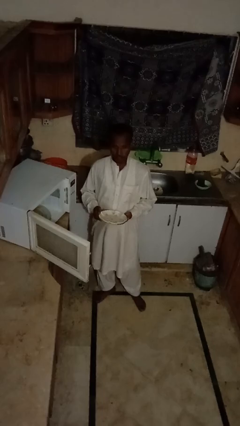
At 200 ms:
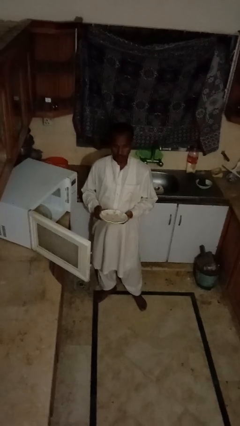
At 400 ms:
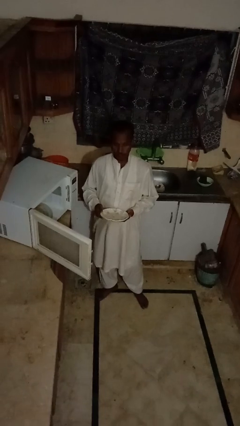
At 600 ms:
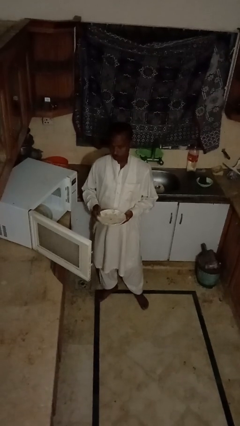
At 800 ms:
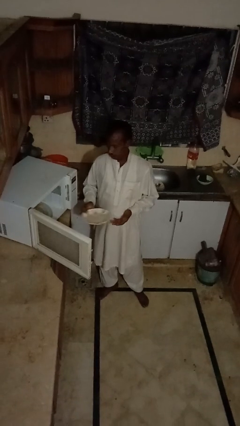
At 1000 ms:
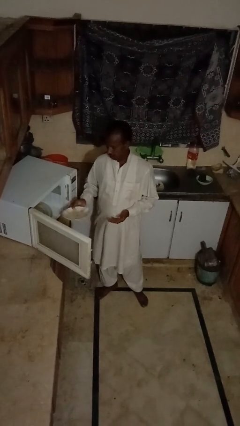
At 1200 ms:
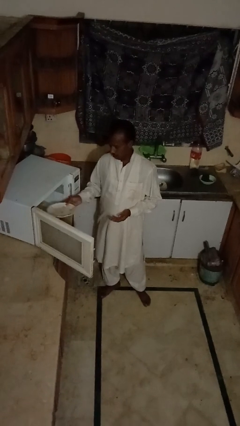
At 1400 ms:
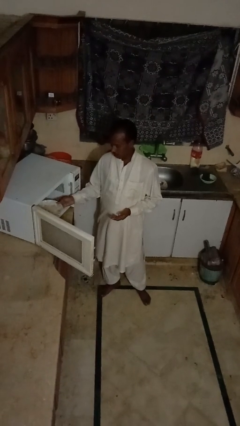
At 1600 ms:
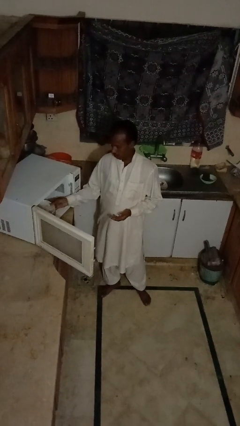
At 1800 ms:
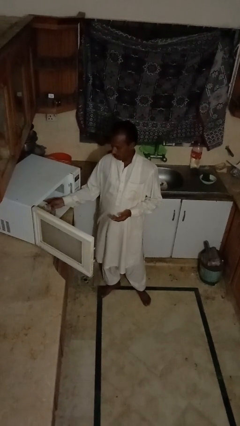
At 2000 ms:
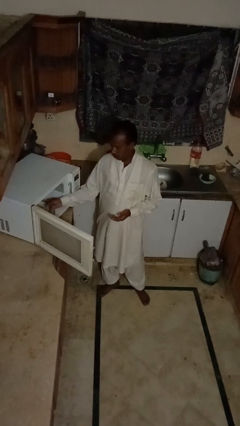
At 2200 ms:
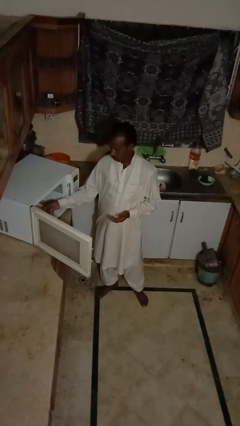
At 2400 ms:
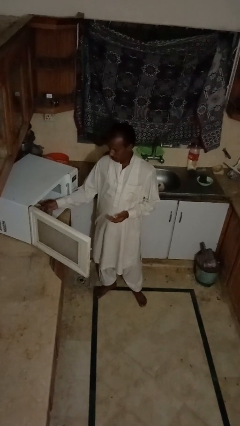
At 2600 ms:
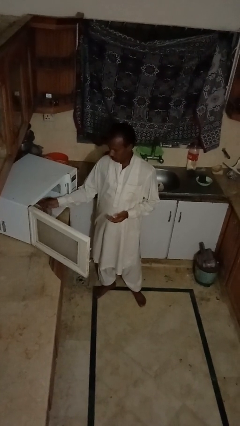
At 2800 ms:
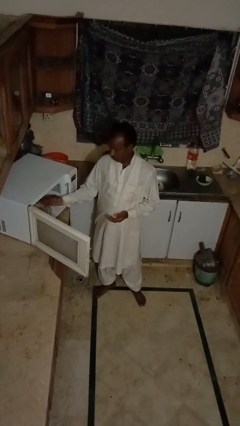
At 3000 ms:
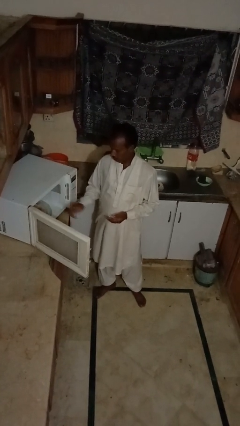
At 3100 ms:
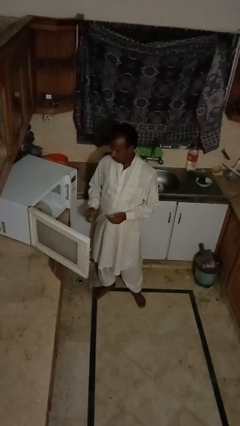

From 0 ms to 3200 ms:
person puts object into microwave

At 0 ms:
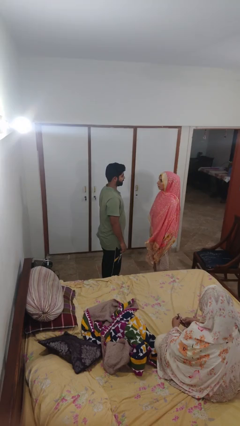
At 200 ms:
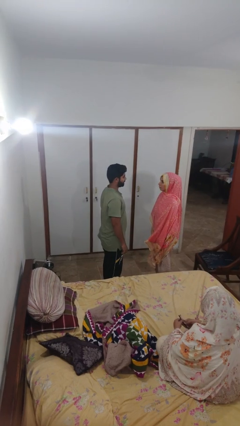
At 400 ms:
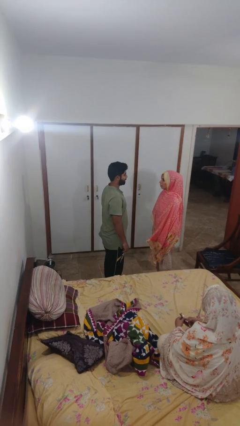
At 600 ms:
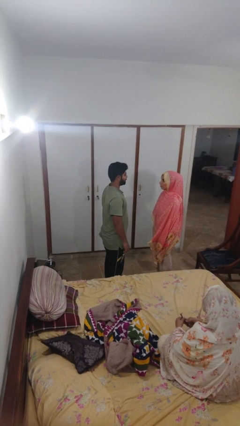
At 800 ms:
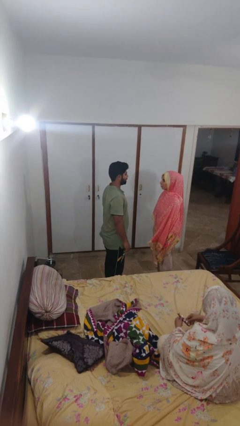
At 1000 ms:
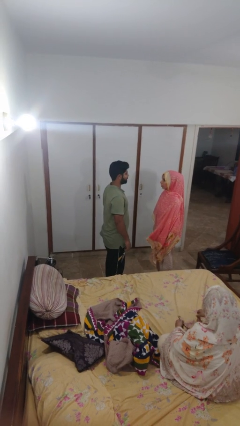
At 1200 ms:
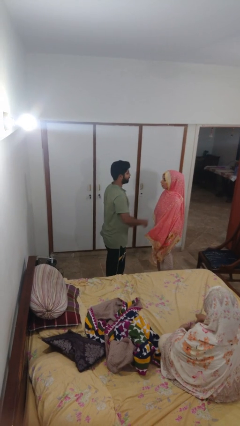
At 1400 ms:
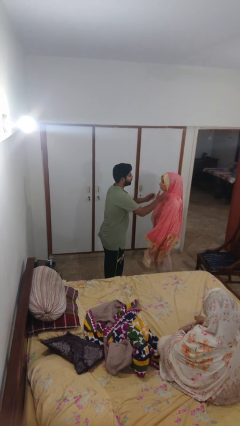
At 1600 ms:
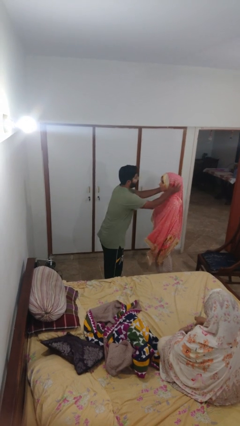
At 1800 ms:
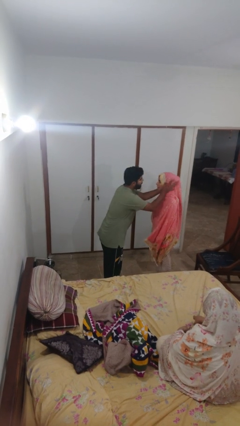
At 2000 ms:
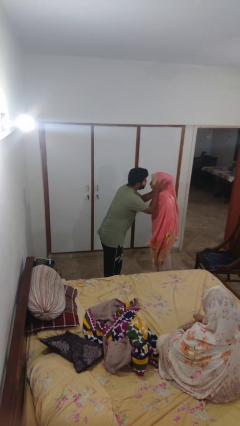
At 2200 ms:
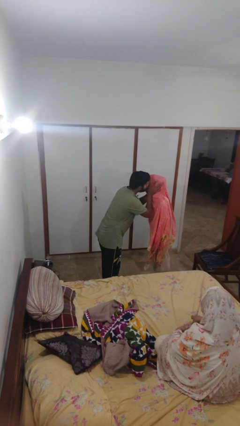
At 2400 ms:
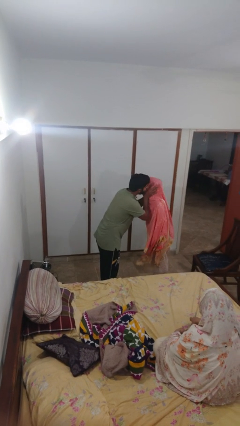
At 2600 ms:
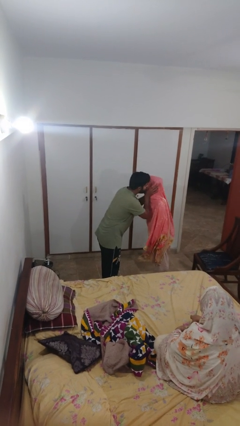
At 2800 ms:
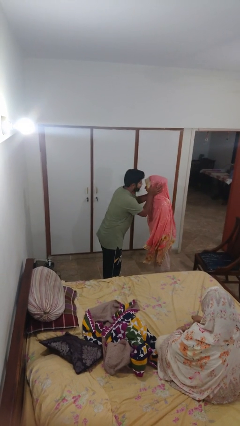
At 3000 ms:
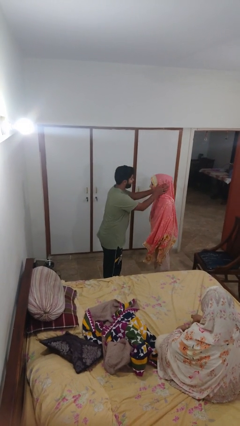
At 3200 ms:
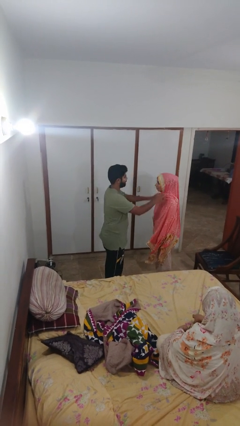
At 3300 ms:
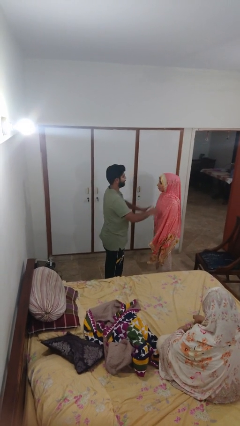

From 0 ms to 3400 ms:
person kisses cheek of person

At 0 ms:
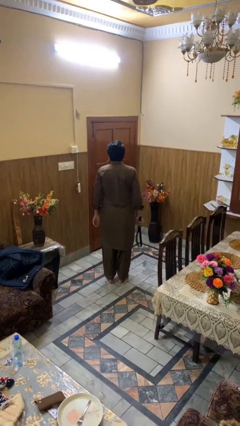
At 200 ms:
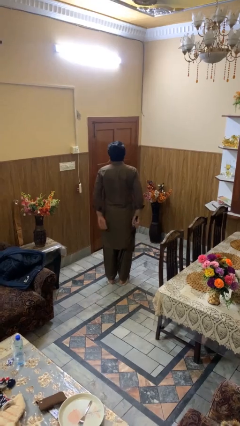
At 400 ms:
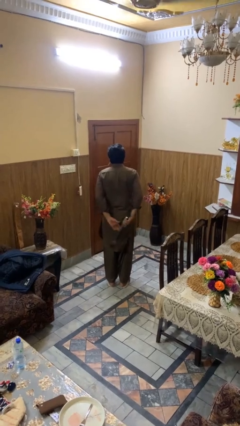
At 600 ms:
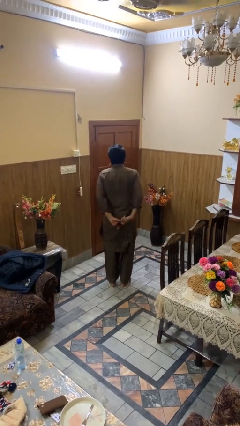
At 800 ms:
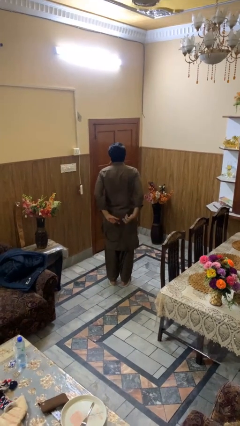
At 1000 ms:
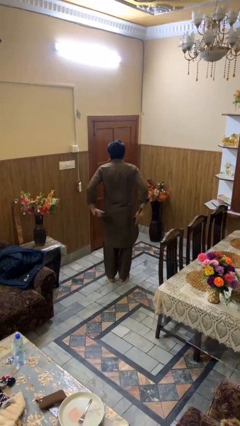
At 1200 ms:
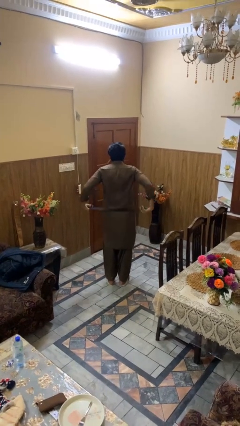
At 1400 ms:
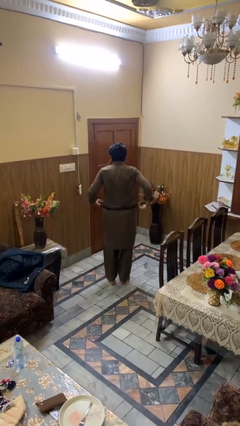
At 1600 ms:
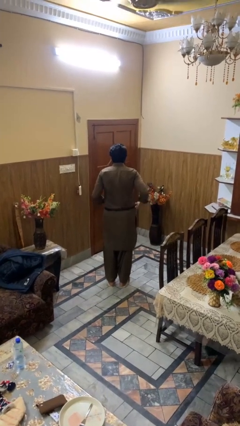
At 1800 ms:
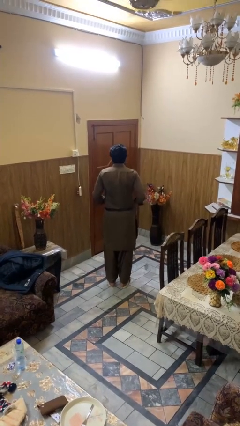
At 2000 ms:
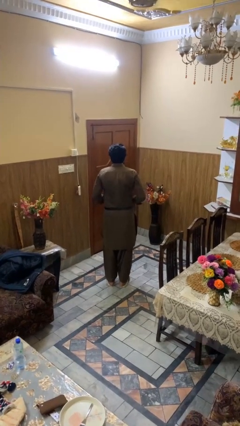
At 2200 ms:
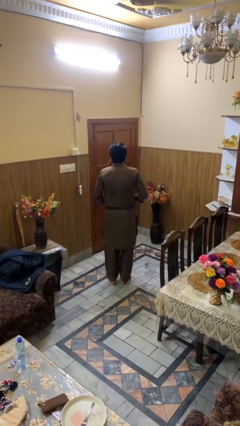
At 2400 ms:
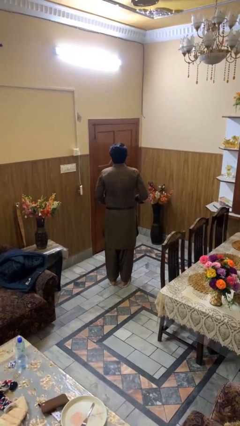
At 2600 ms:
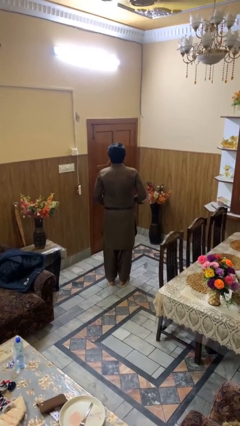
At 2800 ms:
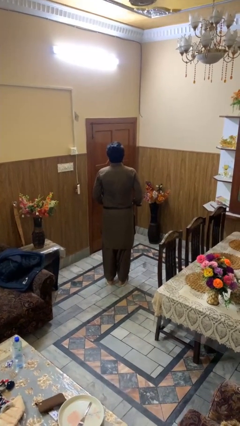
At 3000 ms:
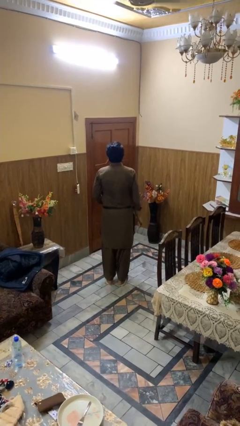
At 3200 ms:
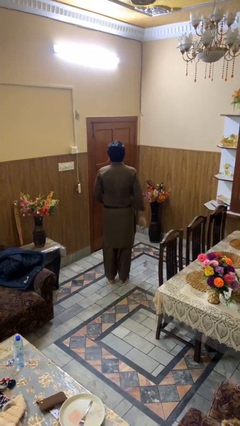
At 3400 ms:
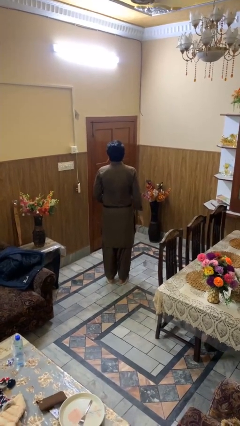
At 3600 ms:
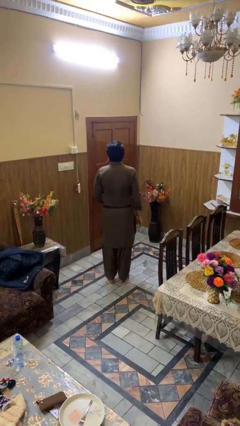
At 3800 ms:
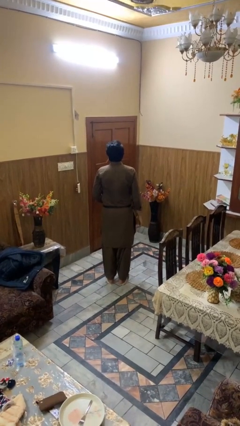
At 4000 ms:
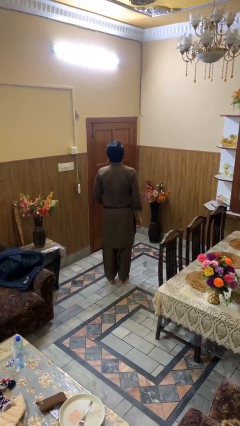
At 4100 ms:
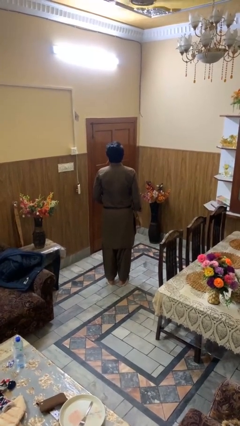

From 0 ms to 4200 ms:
person puts on belt

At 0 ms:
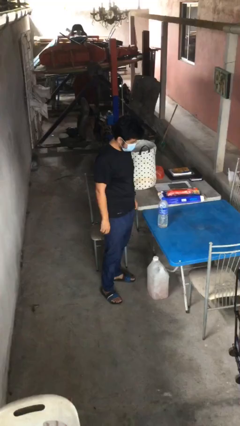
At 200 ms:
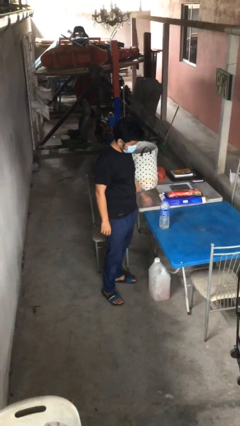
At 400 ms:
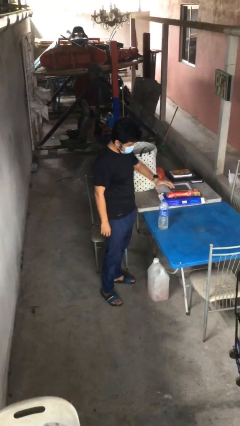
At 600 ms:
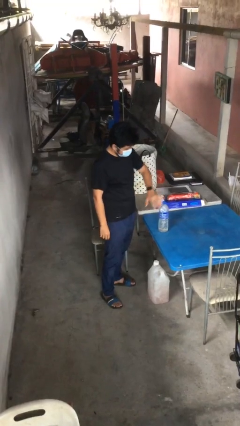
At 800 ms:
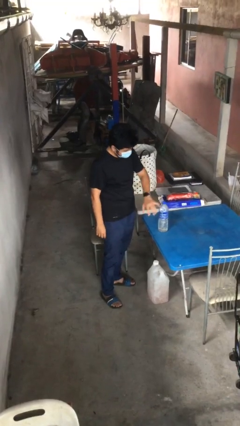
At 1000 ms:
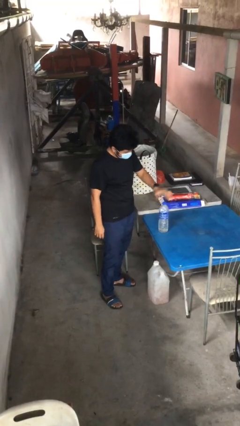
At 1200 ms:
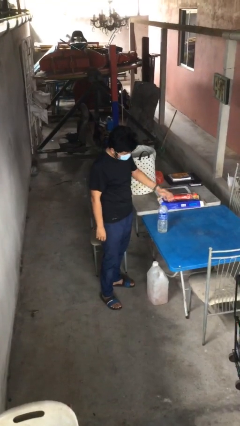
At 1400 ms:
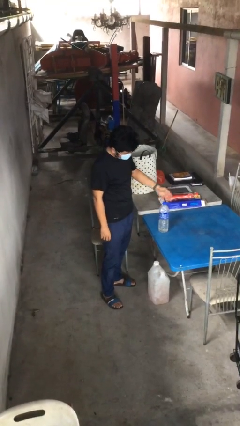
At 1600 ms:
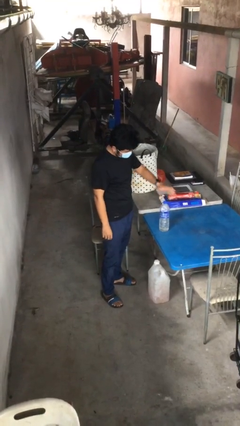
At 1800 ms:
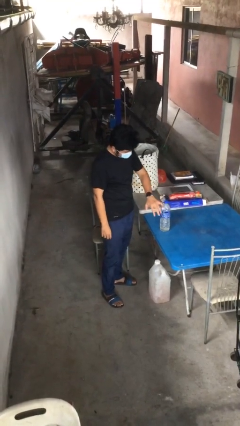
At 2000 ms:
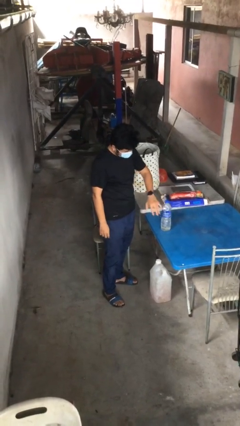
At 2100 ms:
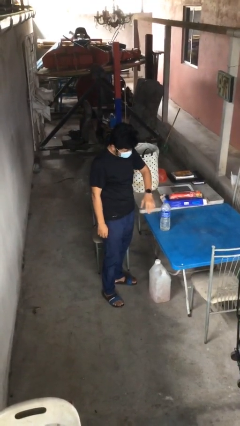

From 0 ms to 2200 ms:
person waves hand over object

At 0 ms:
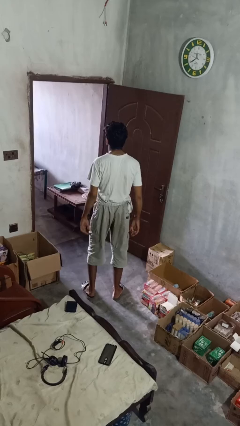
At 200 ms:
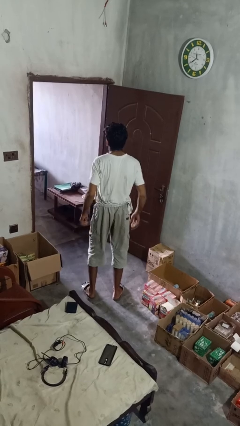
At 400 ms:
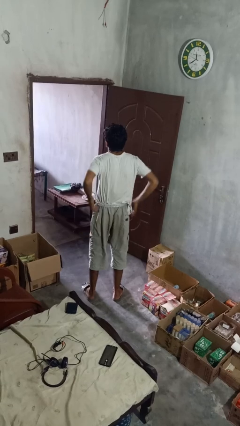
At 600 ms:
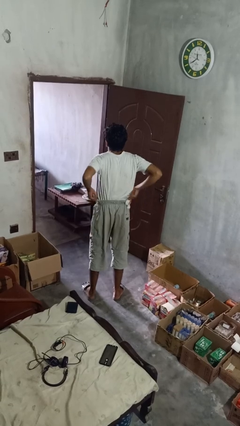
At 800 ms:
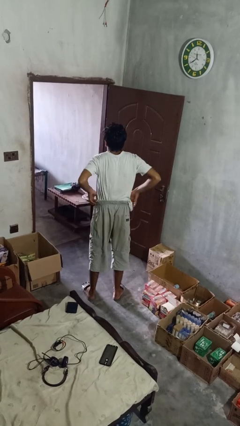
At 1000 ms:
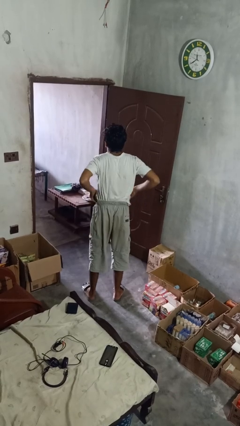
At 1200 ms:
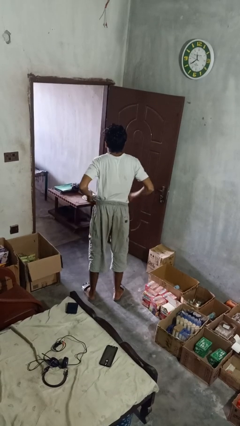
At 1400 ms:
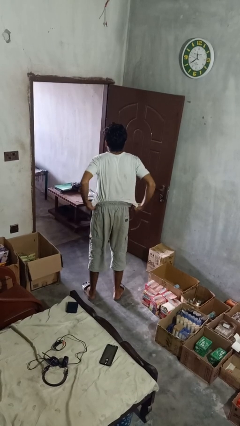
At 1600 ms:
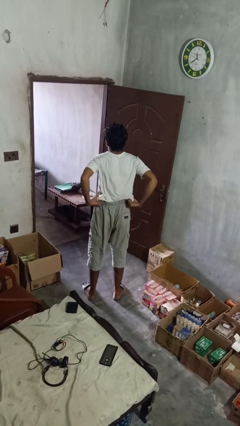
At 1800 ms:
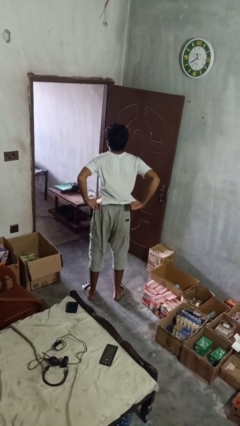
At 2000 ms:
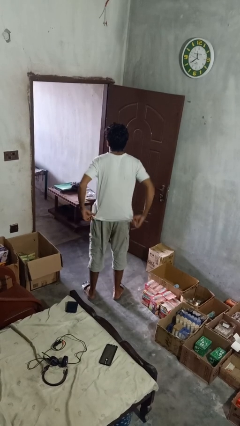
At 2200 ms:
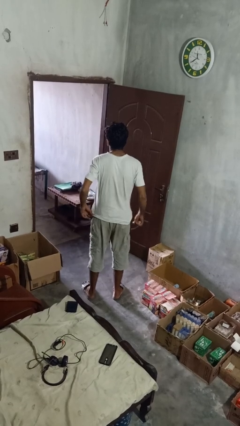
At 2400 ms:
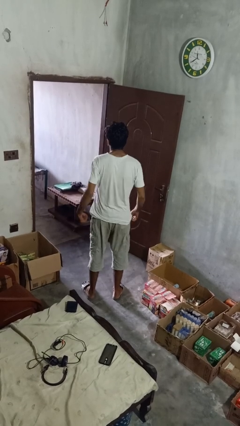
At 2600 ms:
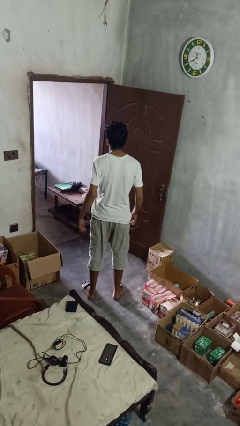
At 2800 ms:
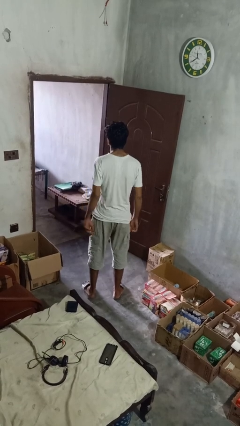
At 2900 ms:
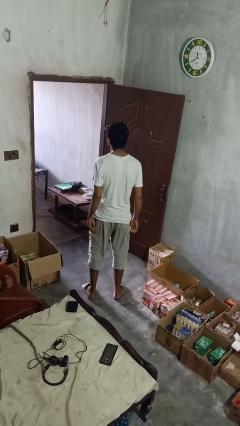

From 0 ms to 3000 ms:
person untucks shirt

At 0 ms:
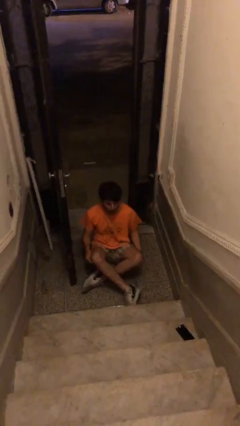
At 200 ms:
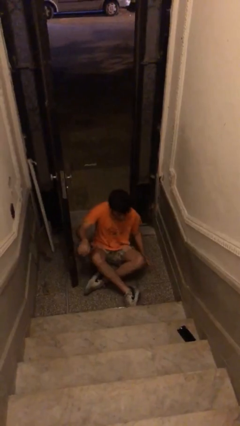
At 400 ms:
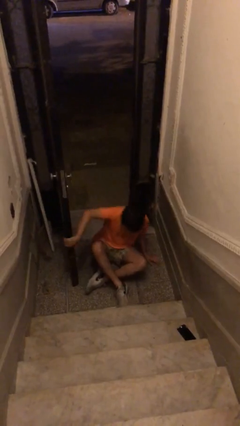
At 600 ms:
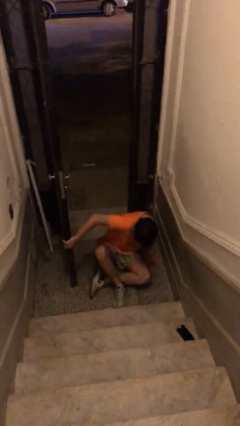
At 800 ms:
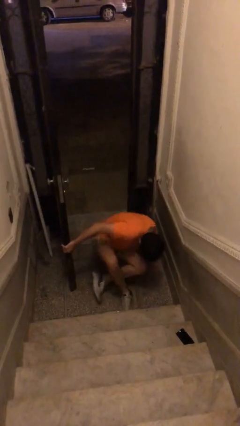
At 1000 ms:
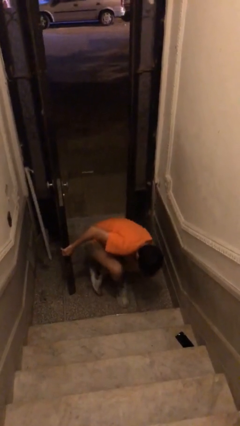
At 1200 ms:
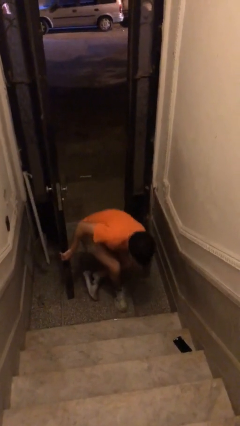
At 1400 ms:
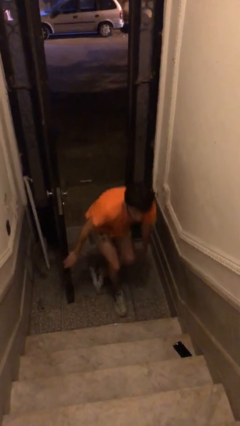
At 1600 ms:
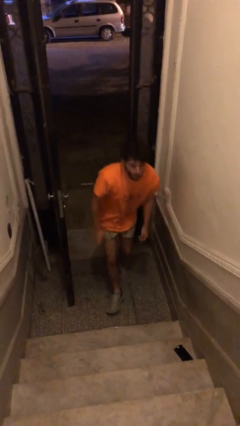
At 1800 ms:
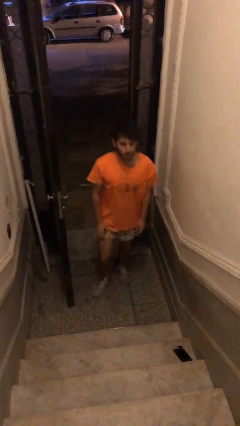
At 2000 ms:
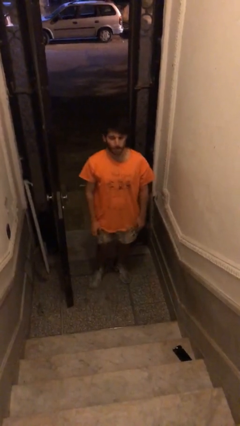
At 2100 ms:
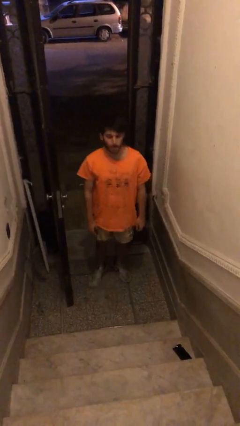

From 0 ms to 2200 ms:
person stands up
